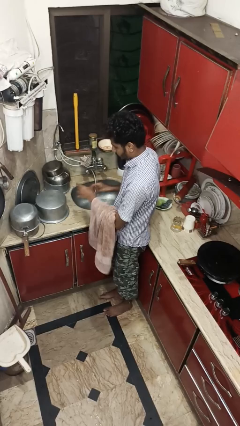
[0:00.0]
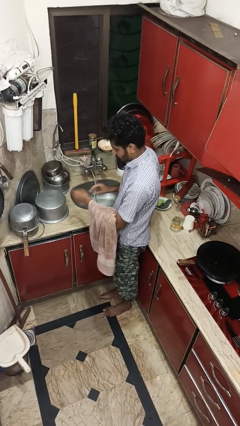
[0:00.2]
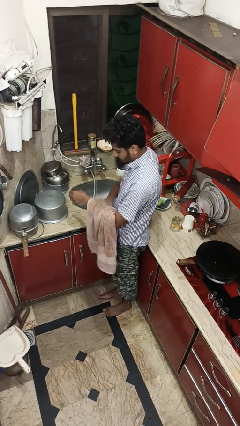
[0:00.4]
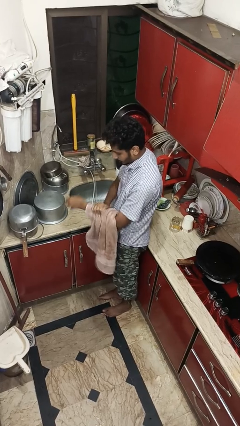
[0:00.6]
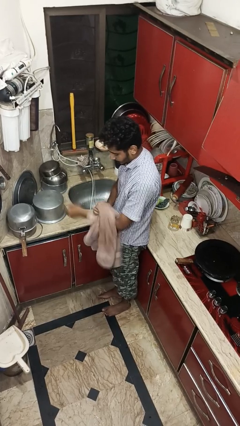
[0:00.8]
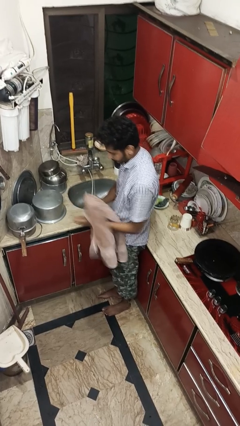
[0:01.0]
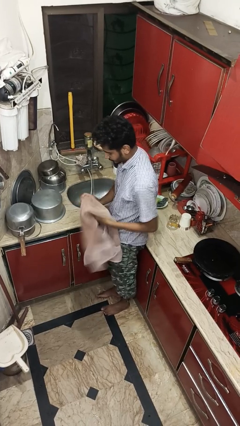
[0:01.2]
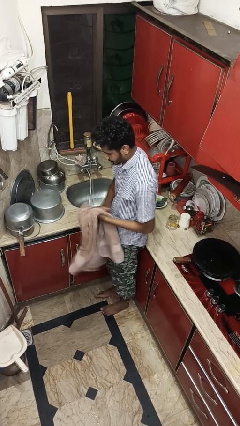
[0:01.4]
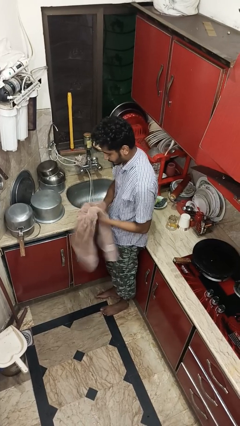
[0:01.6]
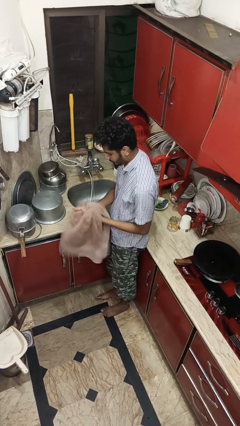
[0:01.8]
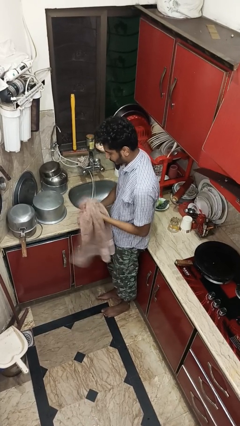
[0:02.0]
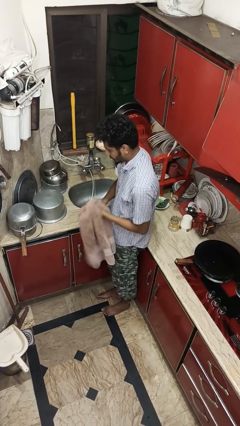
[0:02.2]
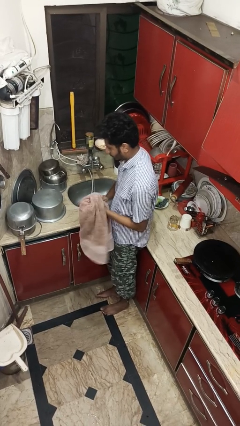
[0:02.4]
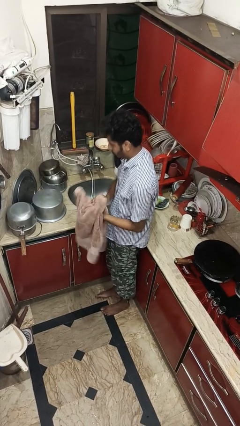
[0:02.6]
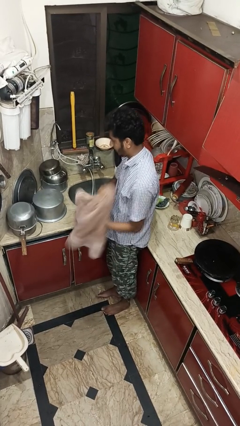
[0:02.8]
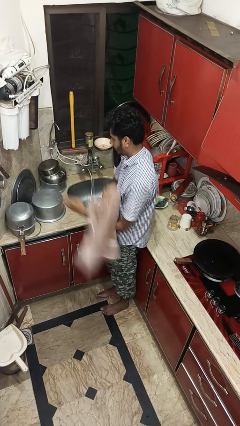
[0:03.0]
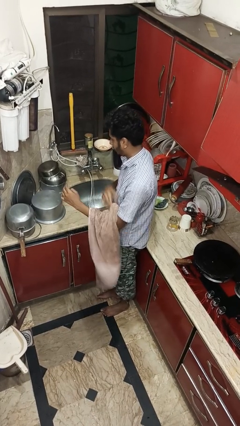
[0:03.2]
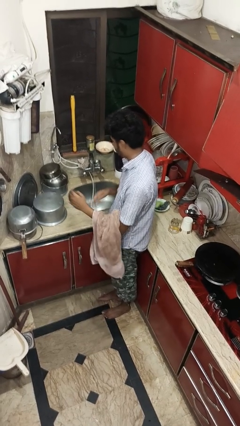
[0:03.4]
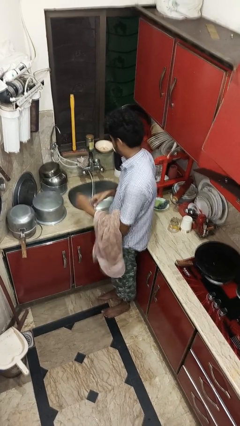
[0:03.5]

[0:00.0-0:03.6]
person dries hands with towel

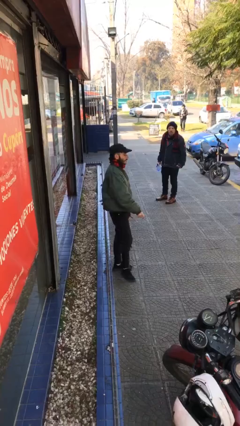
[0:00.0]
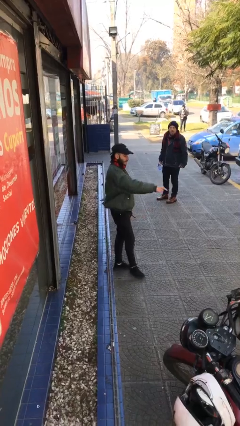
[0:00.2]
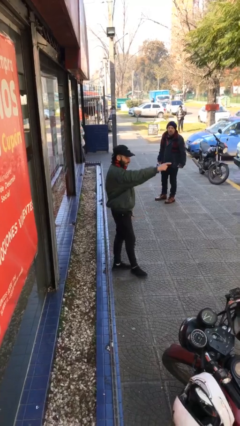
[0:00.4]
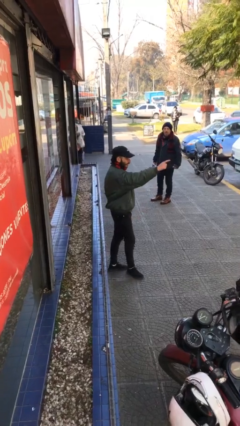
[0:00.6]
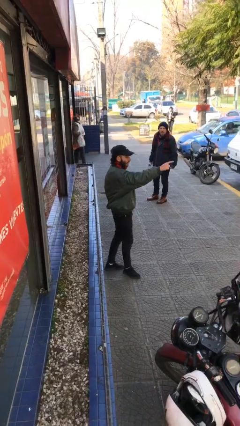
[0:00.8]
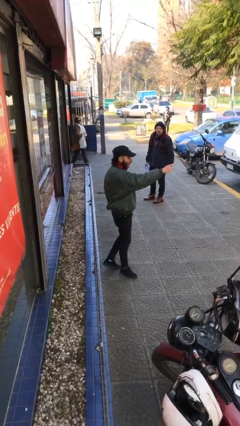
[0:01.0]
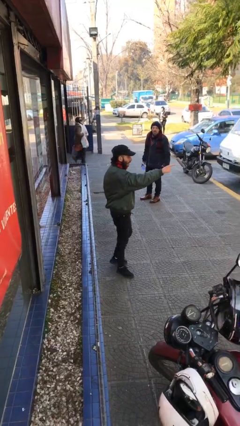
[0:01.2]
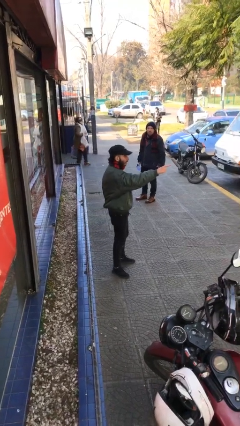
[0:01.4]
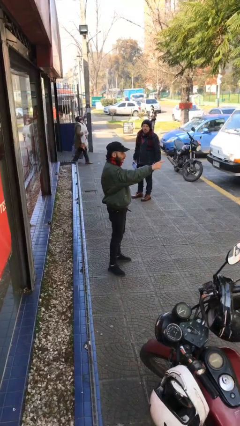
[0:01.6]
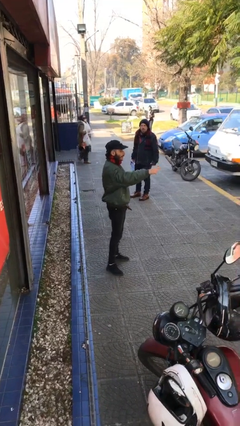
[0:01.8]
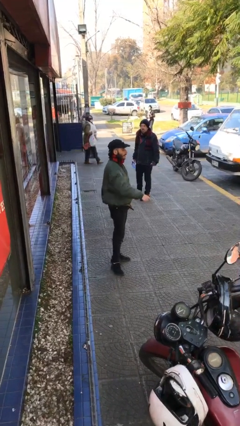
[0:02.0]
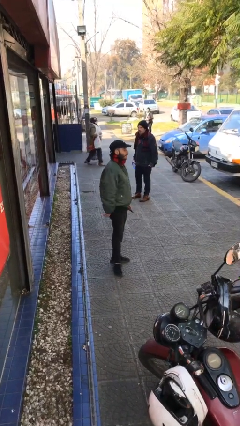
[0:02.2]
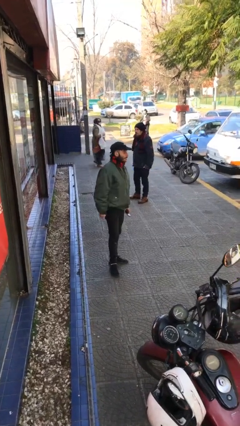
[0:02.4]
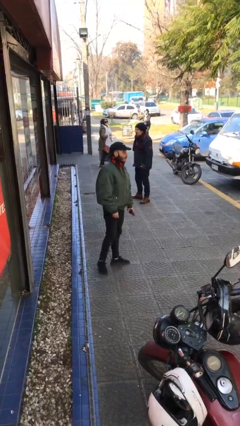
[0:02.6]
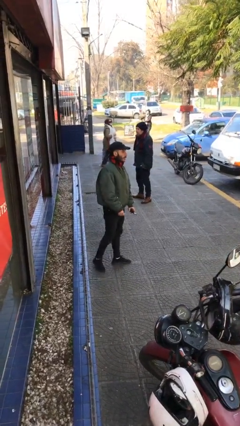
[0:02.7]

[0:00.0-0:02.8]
person points at person

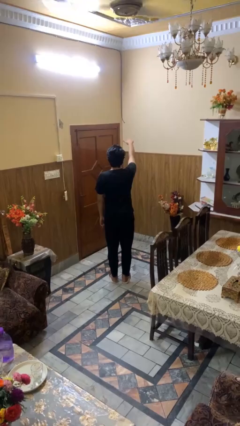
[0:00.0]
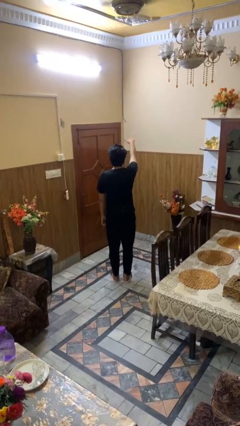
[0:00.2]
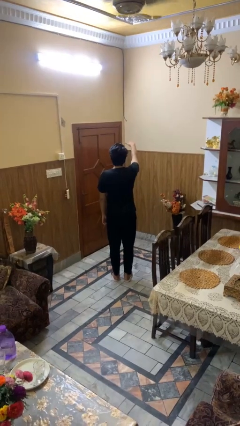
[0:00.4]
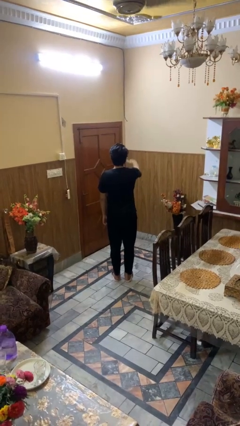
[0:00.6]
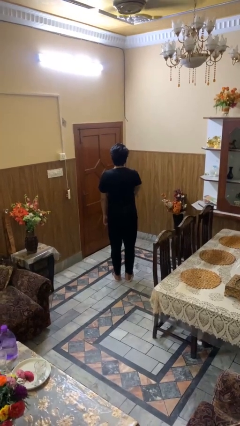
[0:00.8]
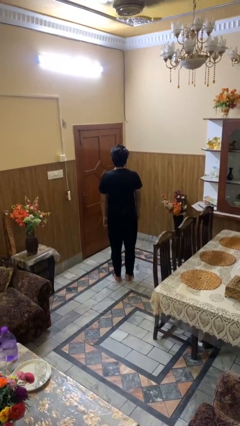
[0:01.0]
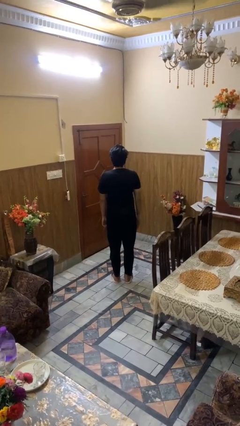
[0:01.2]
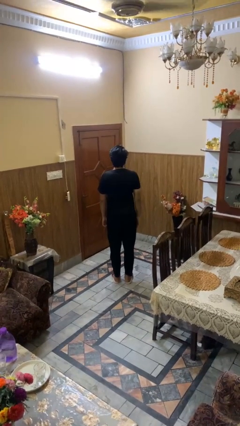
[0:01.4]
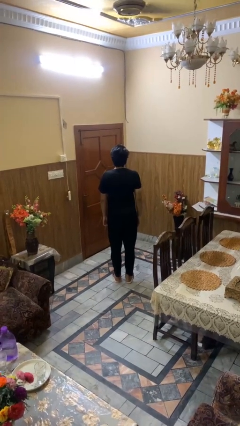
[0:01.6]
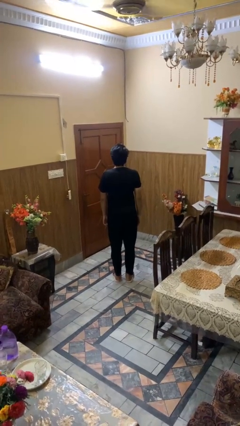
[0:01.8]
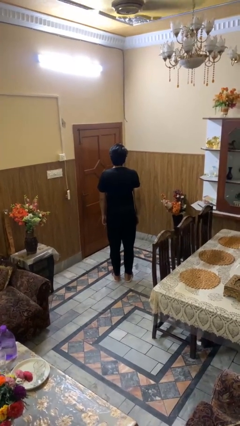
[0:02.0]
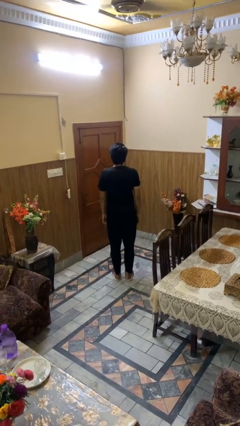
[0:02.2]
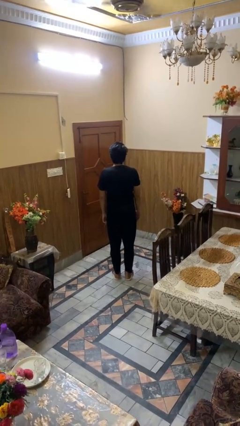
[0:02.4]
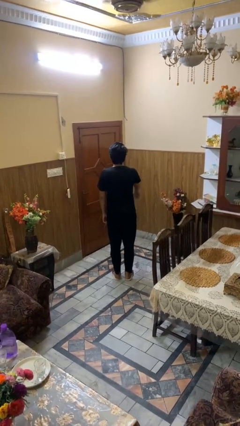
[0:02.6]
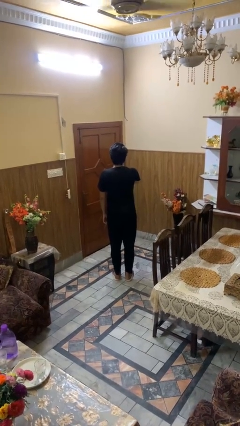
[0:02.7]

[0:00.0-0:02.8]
person gestures swipe down

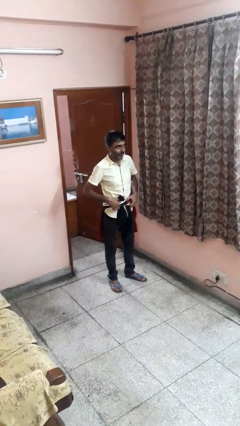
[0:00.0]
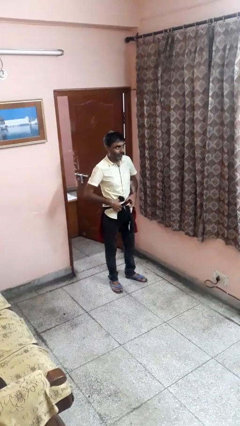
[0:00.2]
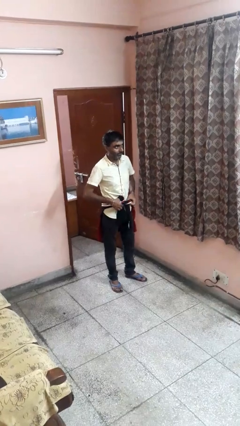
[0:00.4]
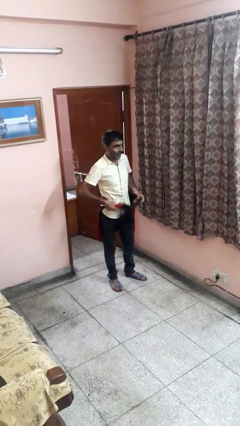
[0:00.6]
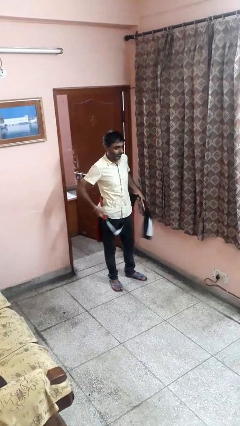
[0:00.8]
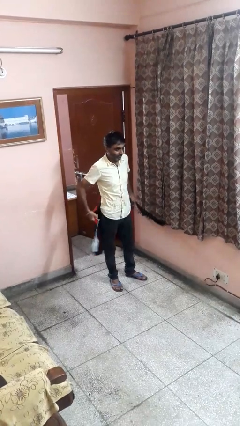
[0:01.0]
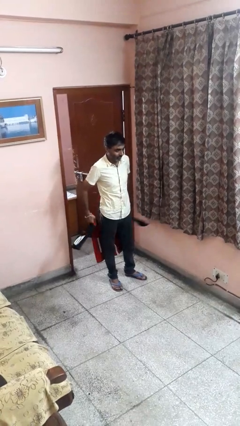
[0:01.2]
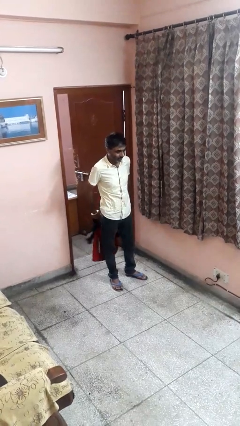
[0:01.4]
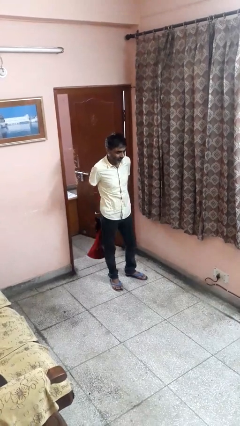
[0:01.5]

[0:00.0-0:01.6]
person unties jacket around waist

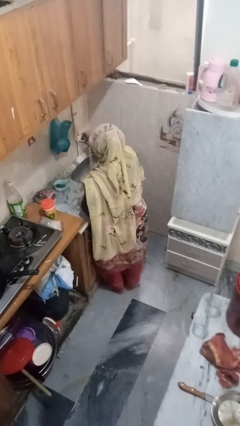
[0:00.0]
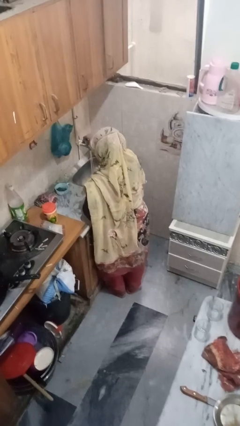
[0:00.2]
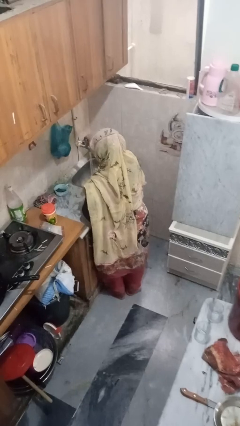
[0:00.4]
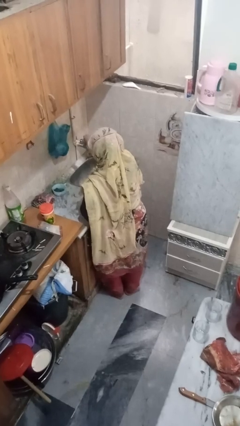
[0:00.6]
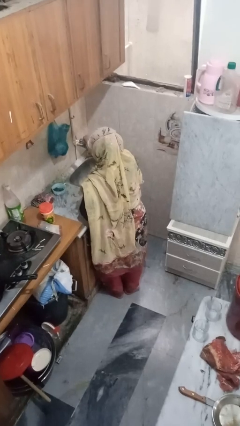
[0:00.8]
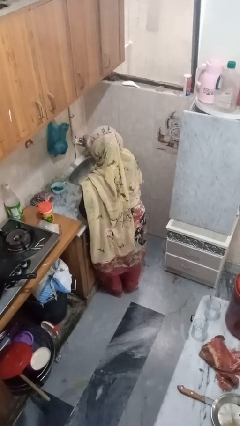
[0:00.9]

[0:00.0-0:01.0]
person turns off faucet

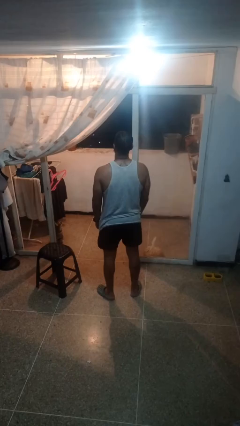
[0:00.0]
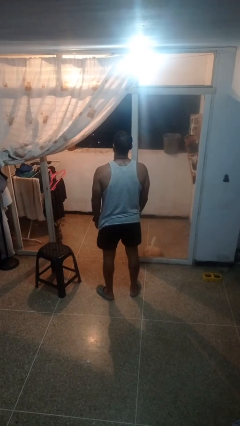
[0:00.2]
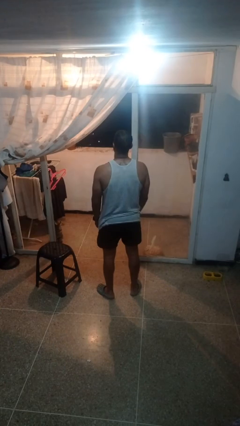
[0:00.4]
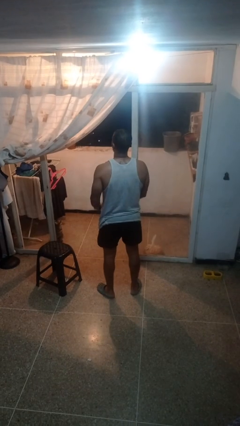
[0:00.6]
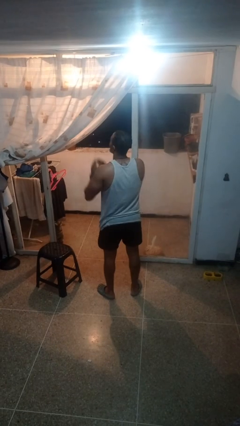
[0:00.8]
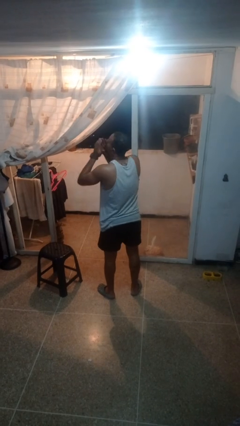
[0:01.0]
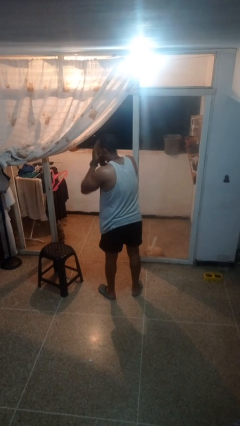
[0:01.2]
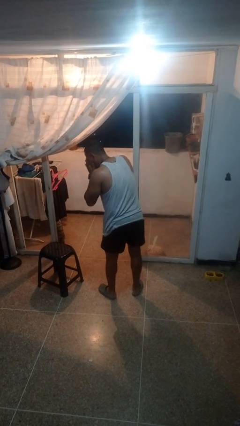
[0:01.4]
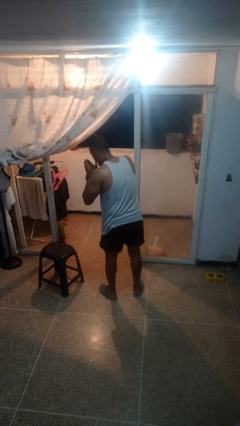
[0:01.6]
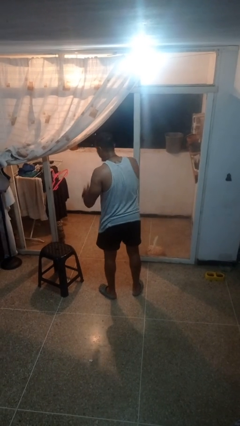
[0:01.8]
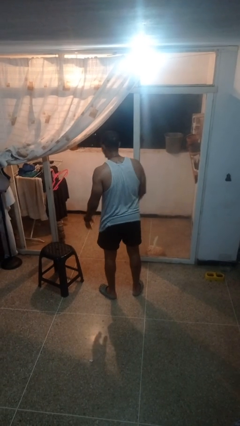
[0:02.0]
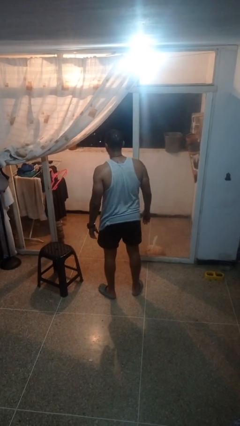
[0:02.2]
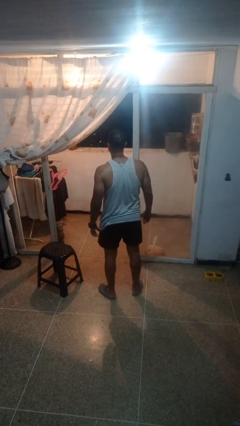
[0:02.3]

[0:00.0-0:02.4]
person sneezes into hand

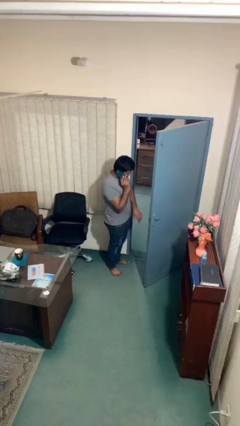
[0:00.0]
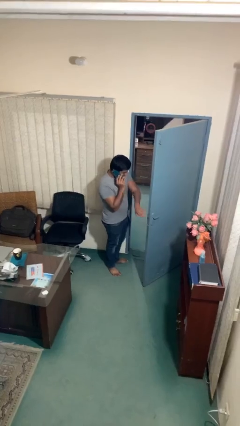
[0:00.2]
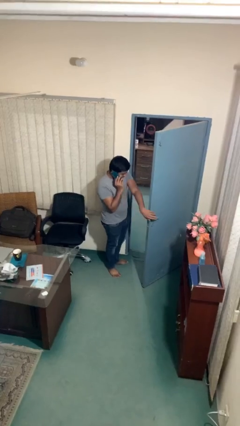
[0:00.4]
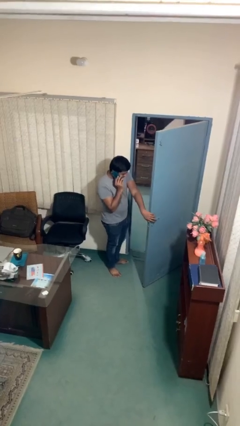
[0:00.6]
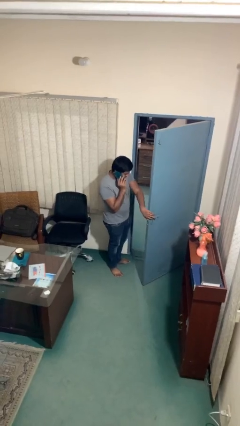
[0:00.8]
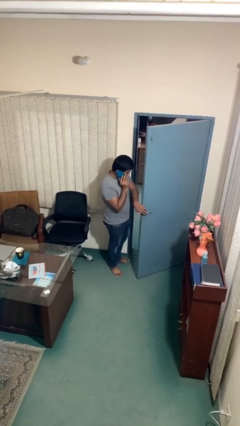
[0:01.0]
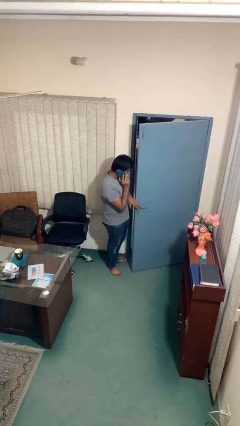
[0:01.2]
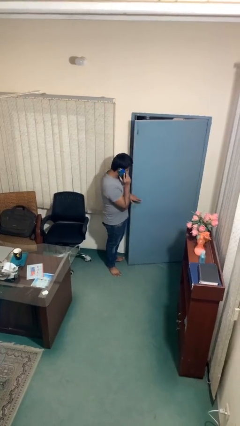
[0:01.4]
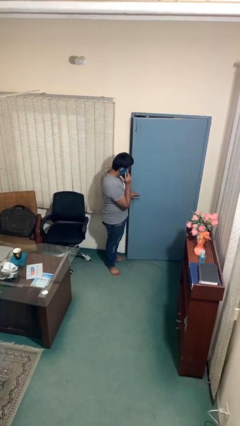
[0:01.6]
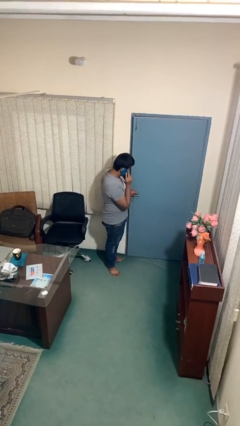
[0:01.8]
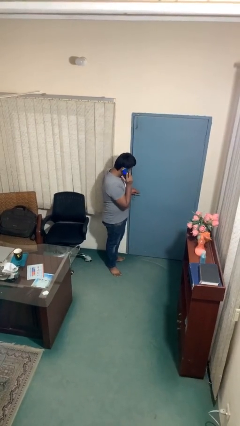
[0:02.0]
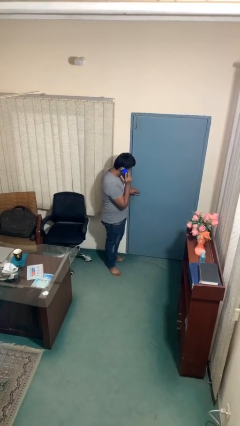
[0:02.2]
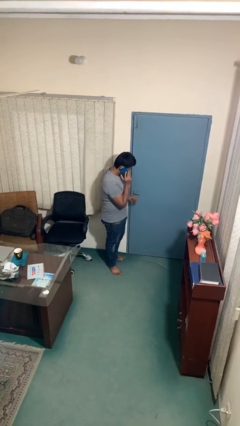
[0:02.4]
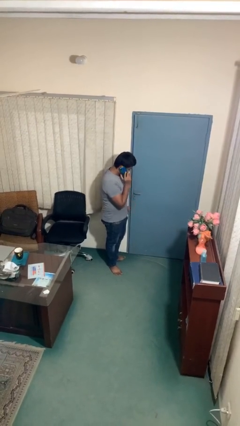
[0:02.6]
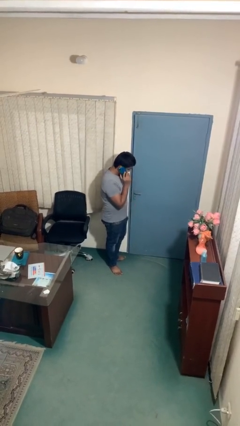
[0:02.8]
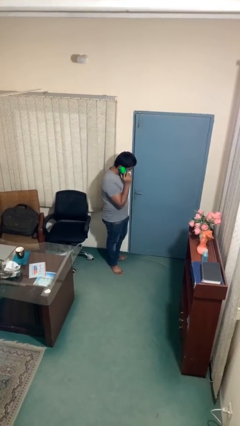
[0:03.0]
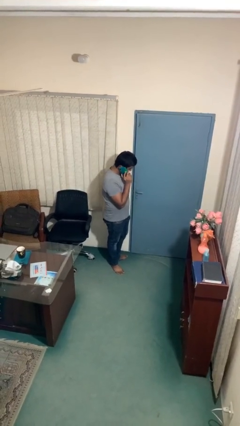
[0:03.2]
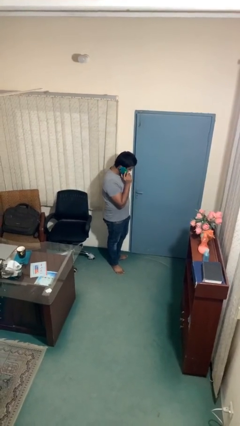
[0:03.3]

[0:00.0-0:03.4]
person closes facility door
